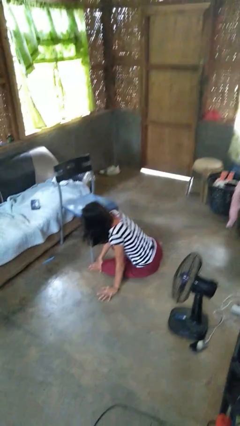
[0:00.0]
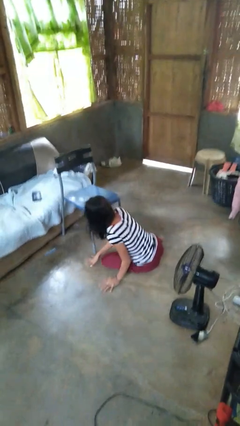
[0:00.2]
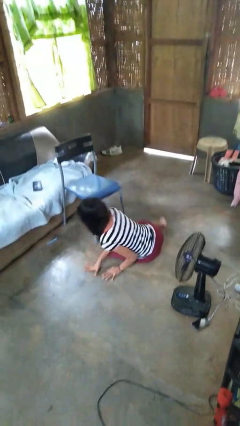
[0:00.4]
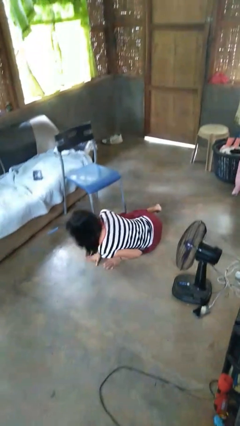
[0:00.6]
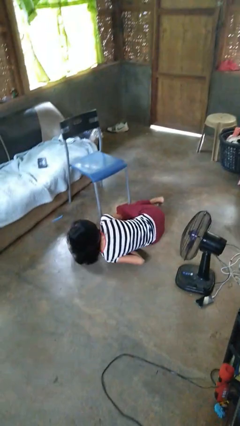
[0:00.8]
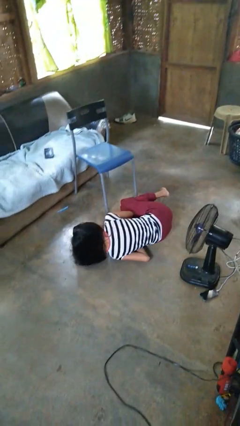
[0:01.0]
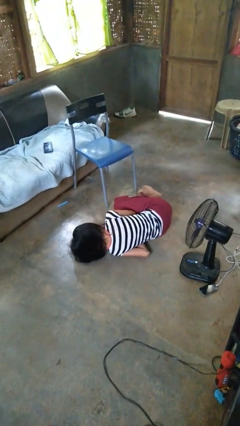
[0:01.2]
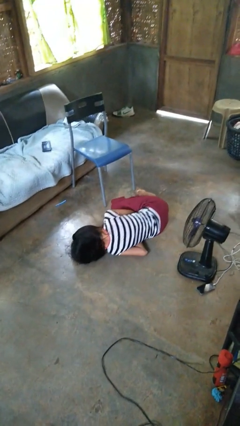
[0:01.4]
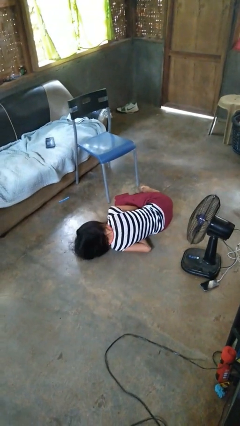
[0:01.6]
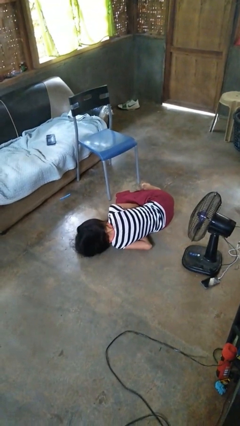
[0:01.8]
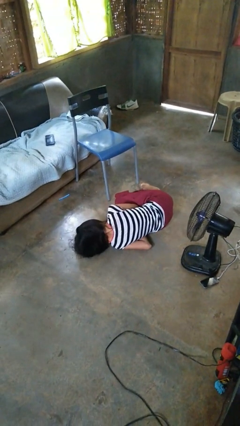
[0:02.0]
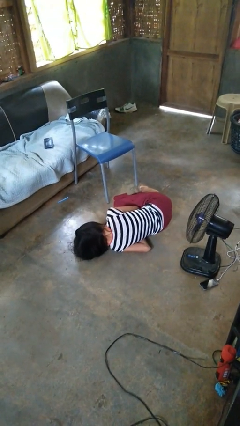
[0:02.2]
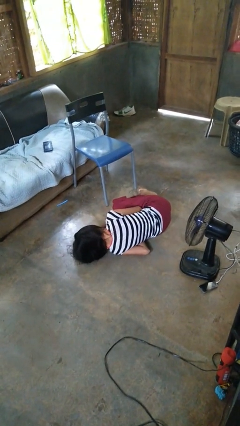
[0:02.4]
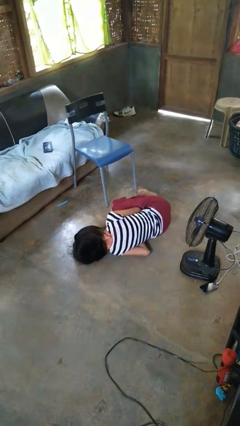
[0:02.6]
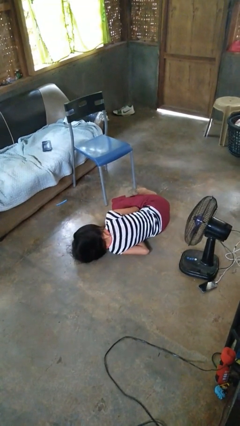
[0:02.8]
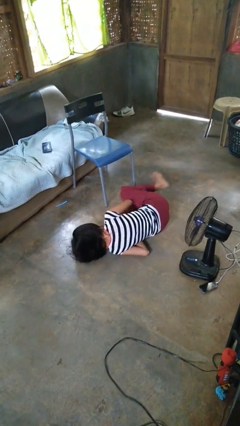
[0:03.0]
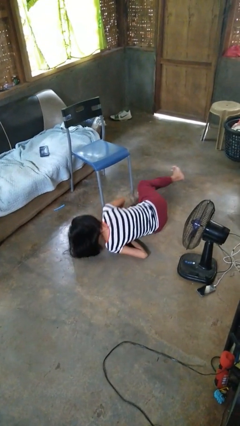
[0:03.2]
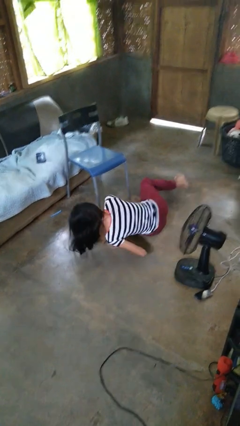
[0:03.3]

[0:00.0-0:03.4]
person lies down on floor

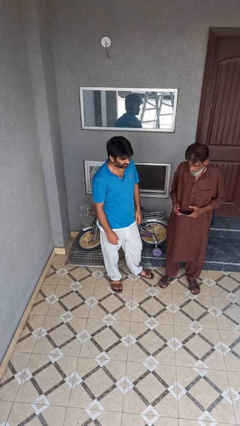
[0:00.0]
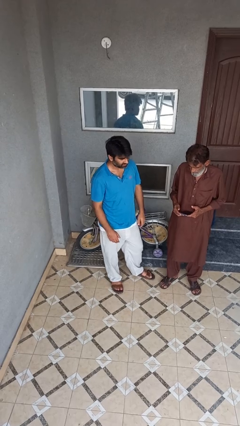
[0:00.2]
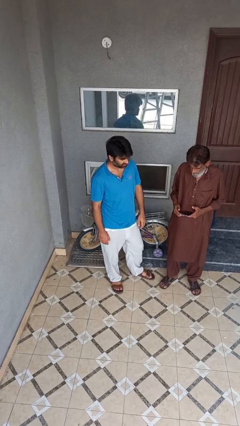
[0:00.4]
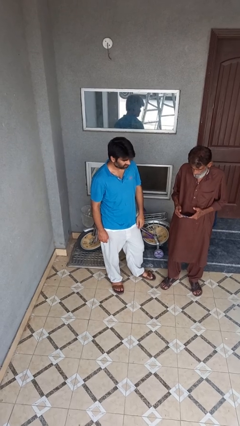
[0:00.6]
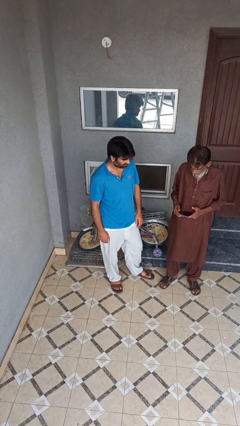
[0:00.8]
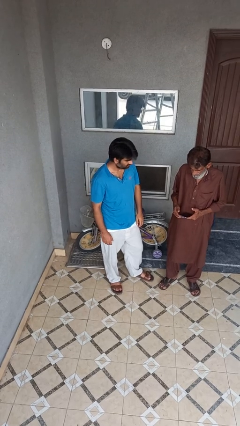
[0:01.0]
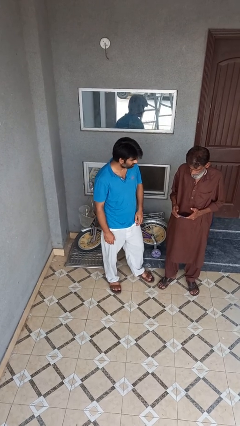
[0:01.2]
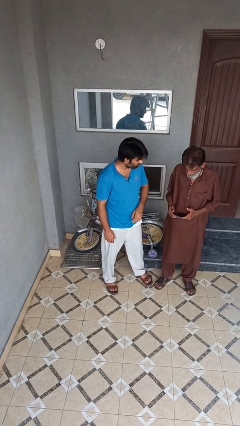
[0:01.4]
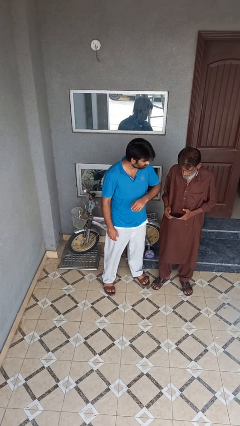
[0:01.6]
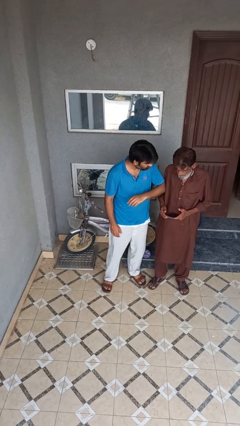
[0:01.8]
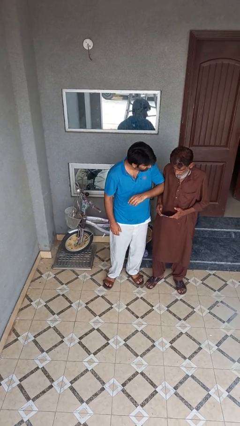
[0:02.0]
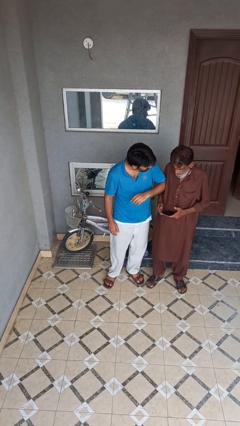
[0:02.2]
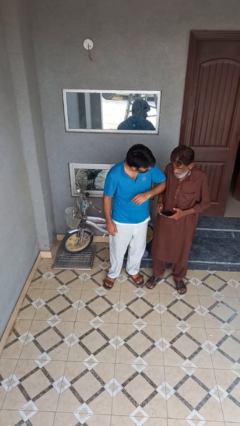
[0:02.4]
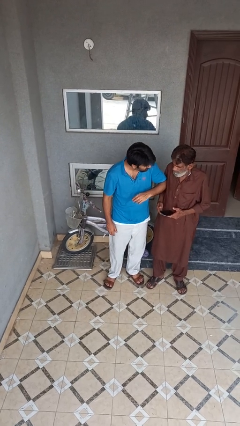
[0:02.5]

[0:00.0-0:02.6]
person kisses cheek of person

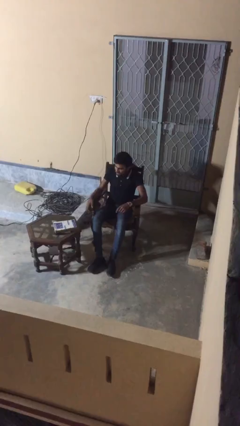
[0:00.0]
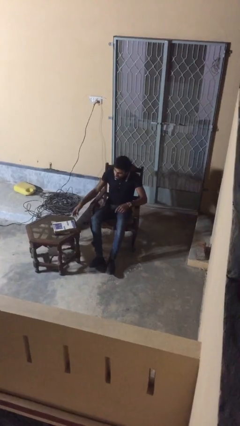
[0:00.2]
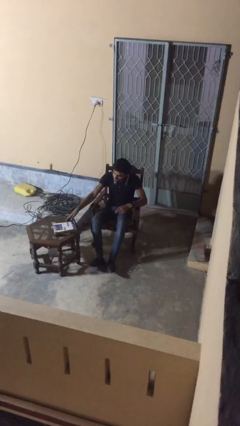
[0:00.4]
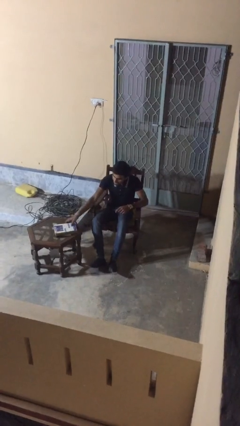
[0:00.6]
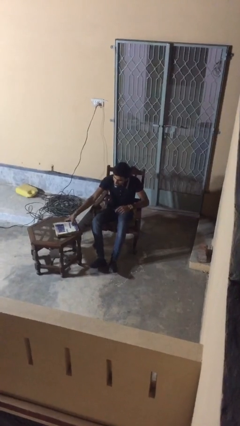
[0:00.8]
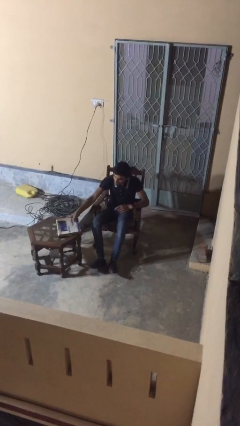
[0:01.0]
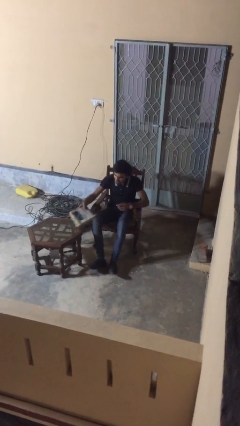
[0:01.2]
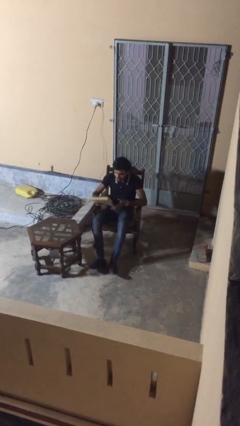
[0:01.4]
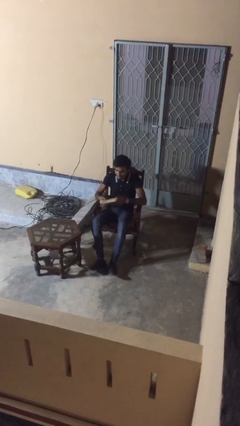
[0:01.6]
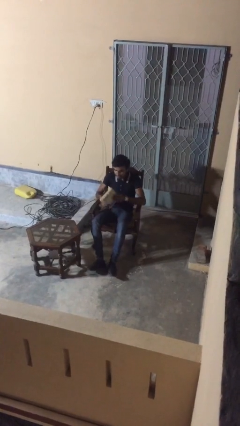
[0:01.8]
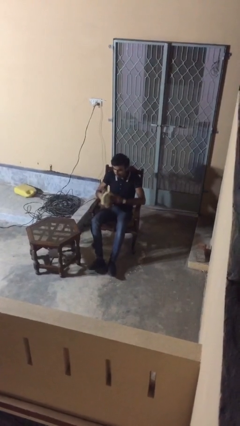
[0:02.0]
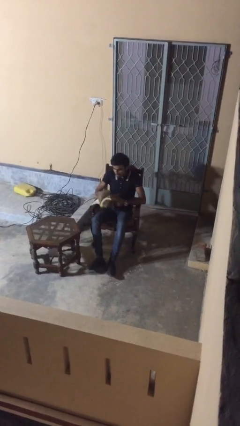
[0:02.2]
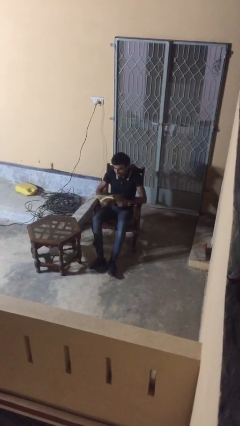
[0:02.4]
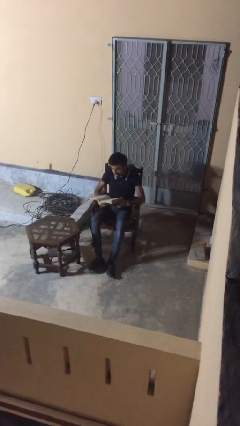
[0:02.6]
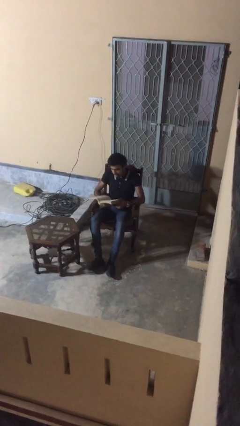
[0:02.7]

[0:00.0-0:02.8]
person picks up object from table

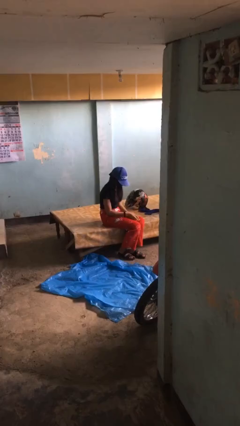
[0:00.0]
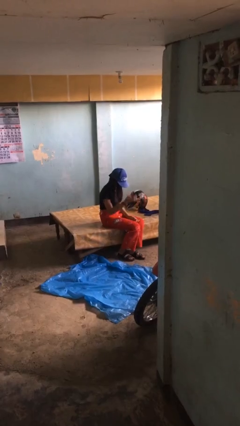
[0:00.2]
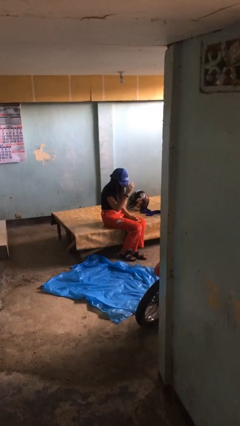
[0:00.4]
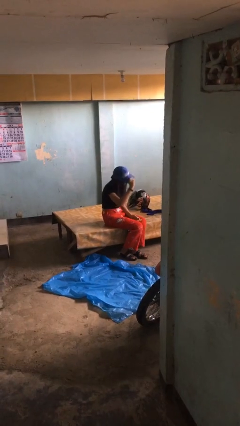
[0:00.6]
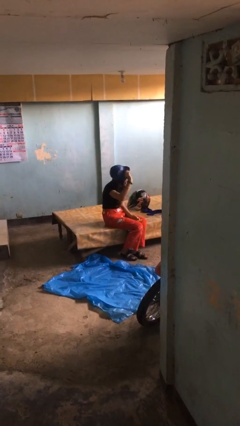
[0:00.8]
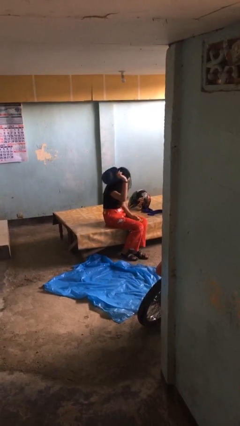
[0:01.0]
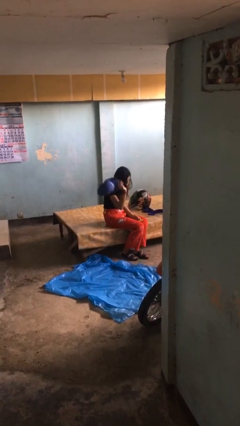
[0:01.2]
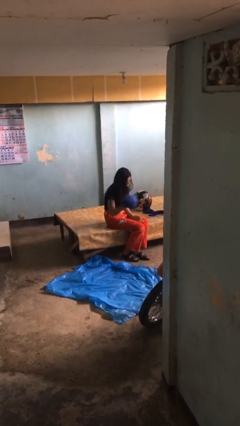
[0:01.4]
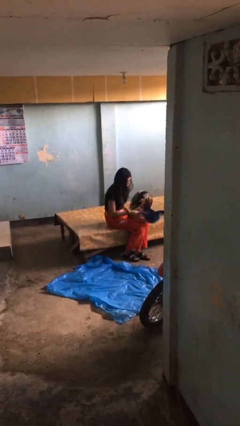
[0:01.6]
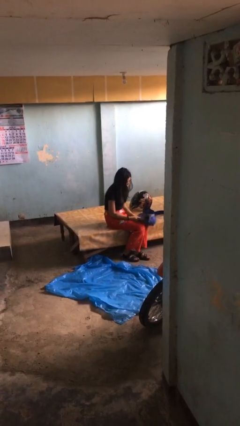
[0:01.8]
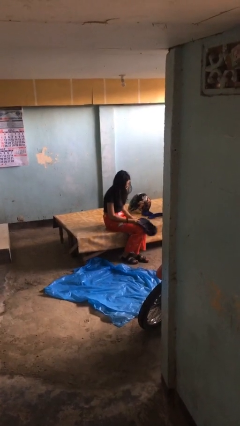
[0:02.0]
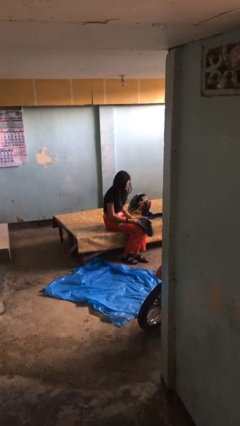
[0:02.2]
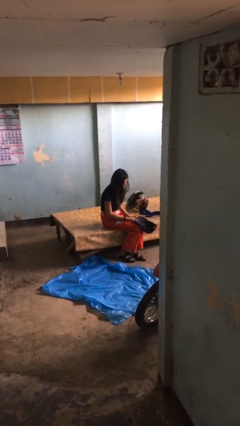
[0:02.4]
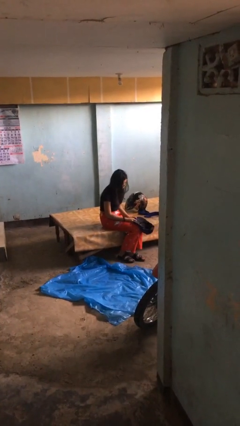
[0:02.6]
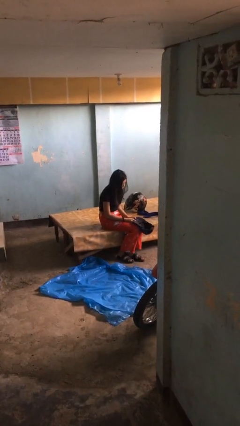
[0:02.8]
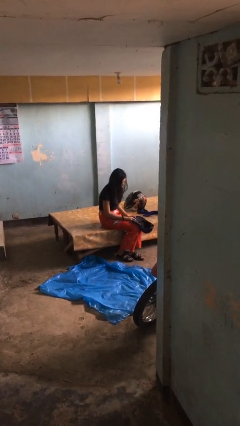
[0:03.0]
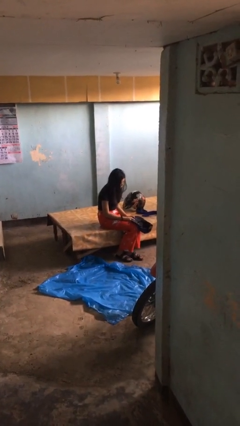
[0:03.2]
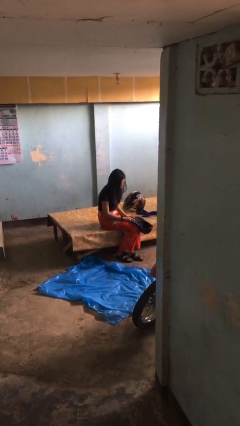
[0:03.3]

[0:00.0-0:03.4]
person takes off hat

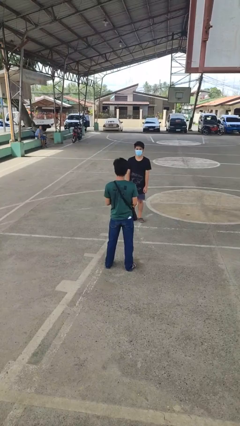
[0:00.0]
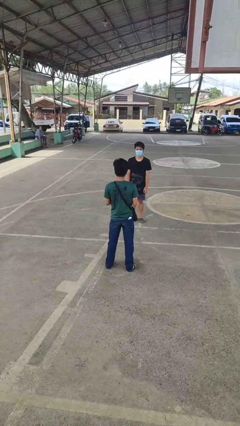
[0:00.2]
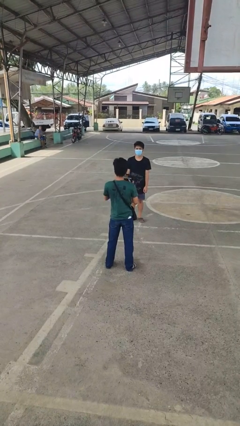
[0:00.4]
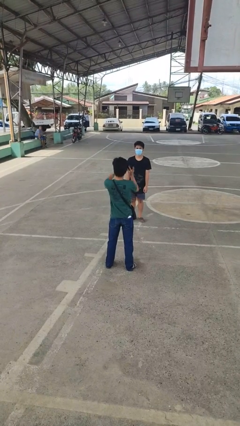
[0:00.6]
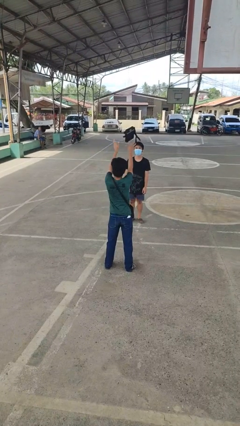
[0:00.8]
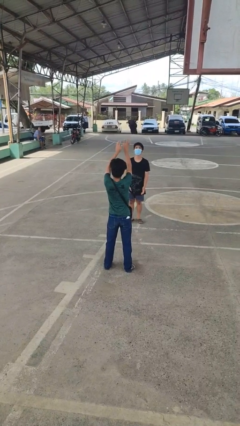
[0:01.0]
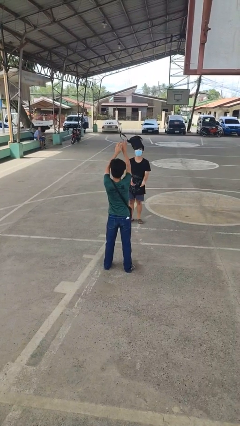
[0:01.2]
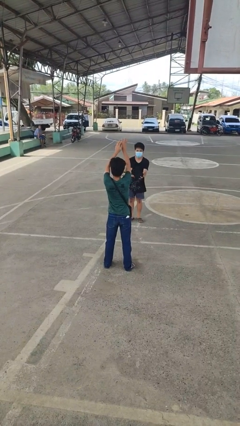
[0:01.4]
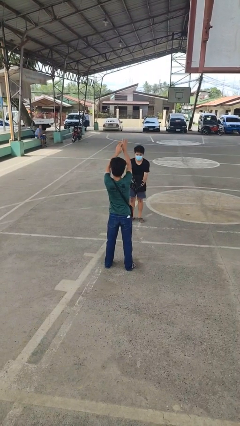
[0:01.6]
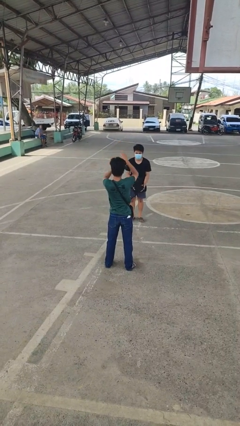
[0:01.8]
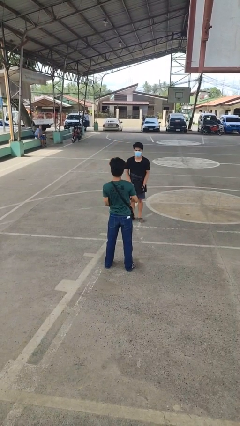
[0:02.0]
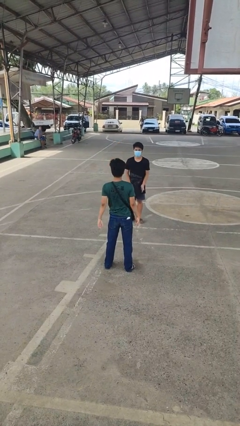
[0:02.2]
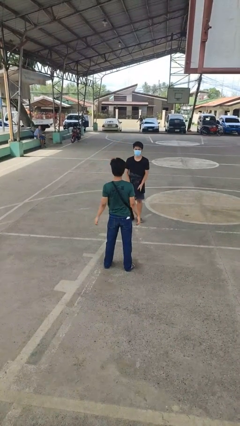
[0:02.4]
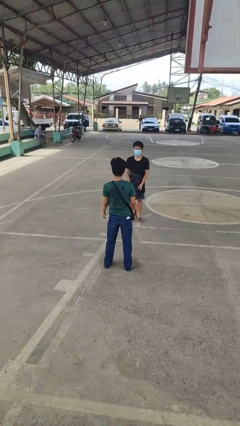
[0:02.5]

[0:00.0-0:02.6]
person throws object to person

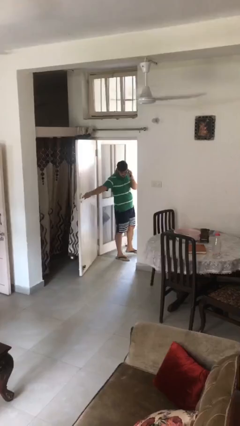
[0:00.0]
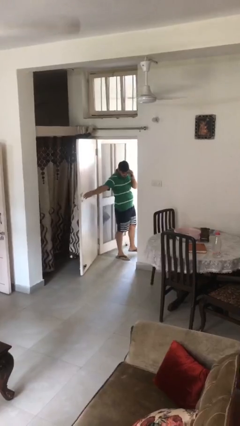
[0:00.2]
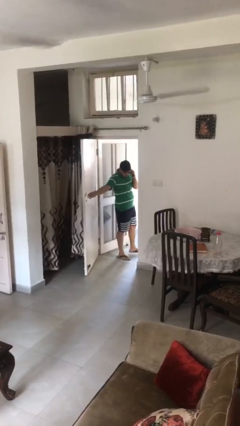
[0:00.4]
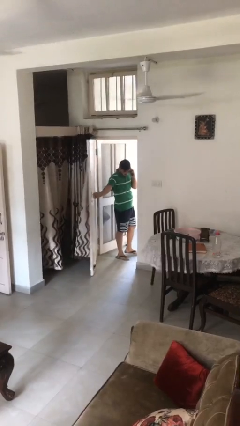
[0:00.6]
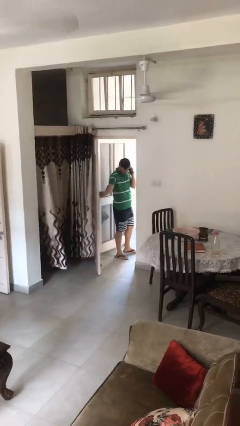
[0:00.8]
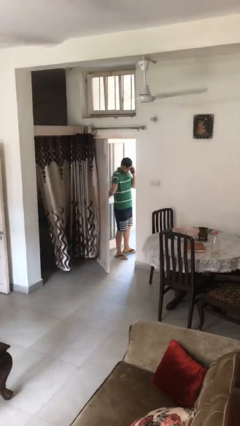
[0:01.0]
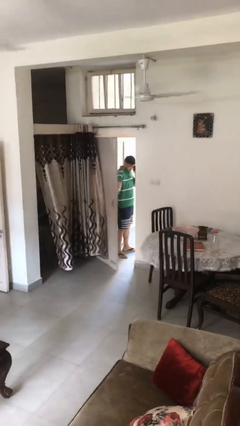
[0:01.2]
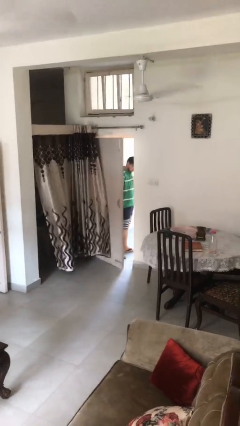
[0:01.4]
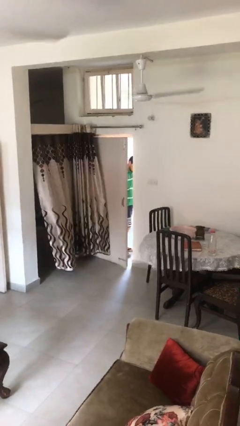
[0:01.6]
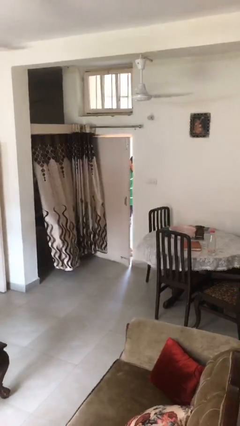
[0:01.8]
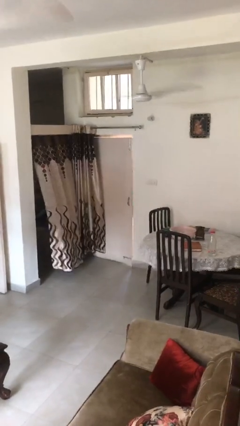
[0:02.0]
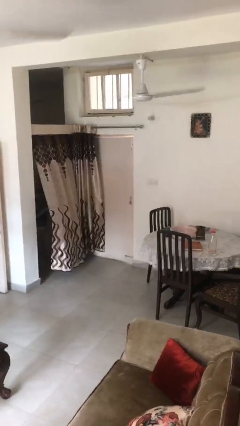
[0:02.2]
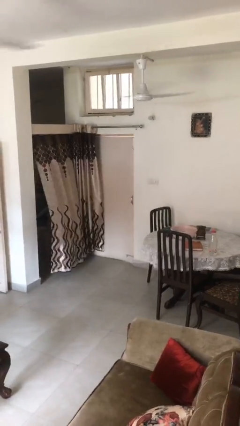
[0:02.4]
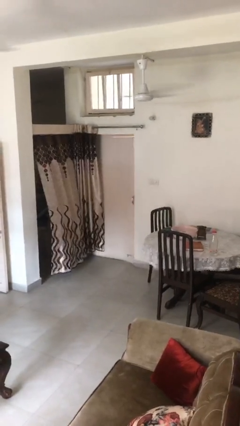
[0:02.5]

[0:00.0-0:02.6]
person closes facility door
